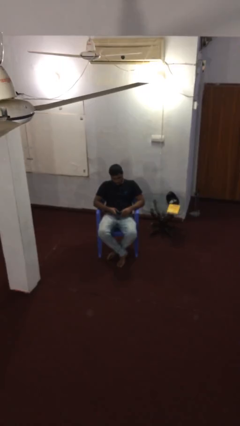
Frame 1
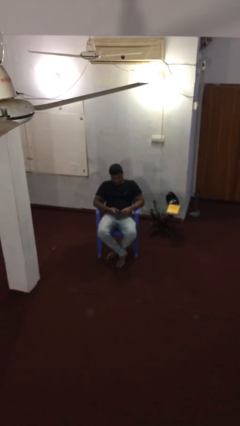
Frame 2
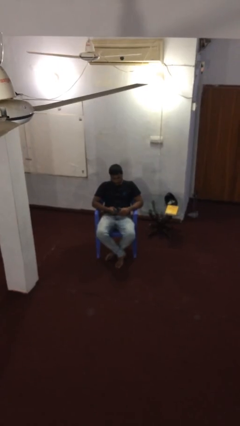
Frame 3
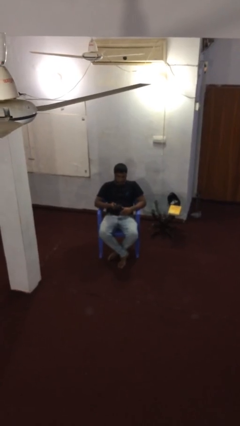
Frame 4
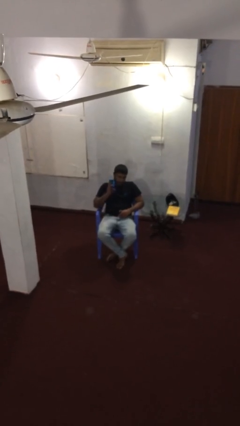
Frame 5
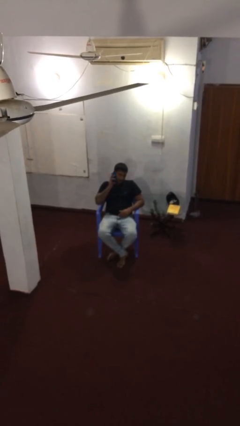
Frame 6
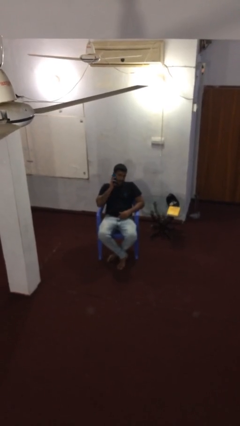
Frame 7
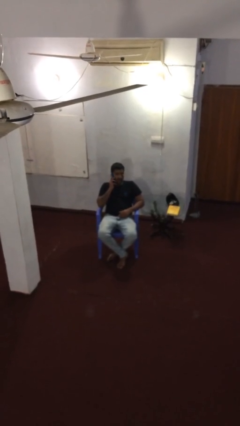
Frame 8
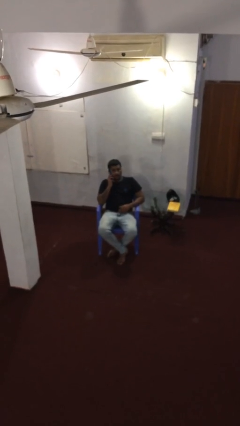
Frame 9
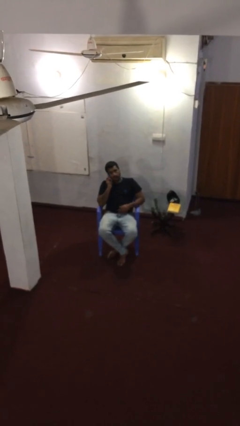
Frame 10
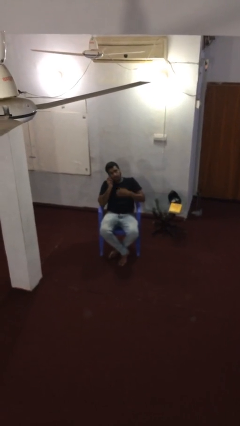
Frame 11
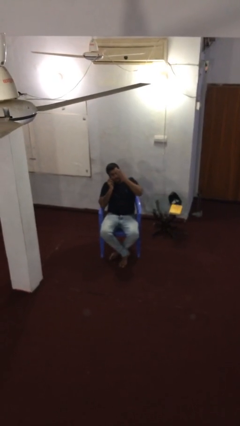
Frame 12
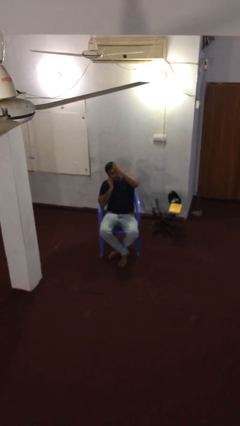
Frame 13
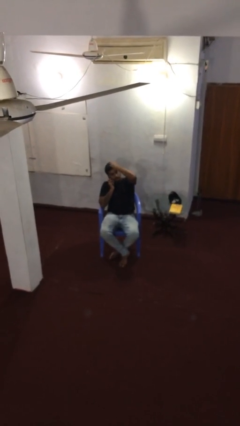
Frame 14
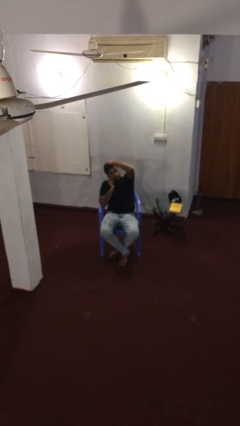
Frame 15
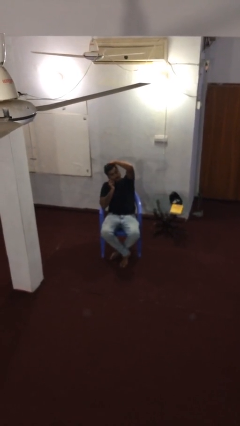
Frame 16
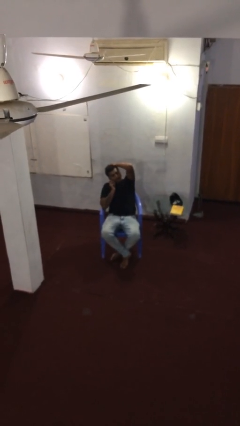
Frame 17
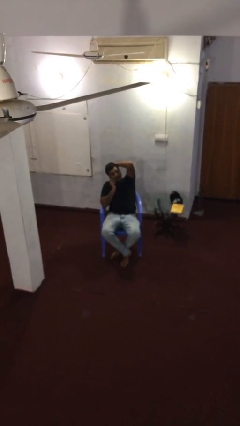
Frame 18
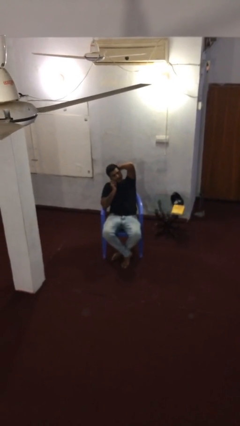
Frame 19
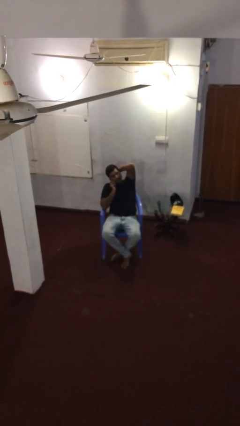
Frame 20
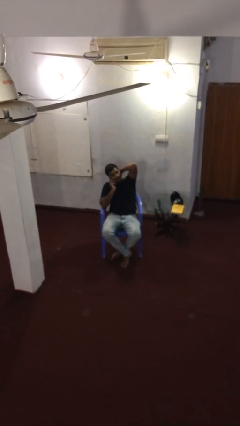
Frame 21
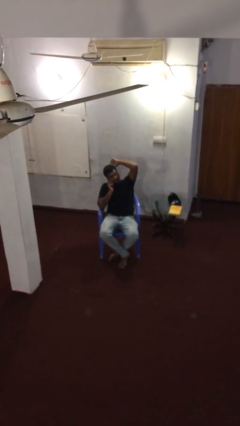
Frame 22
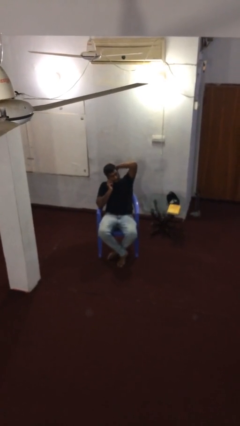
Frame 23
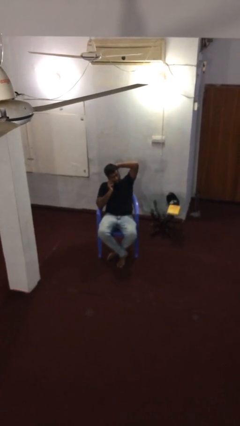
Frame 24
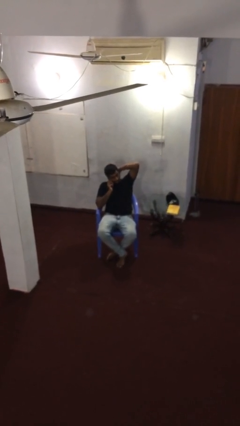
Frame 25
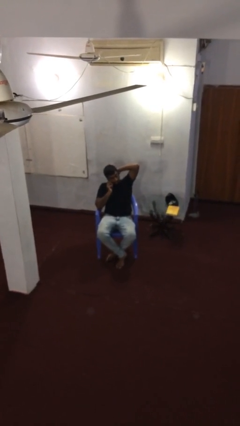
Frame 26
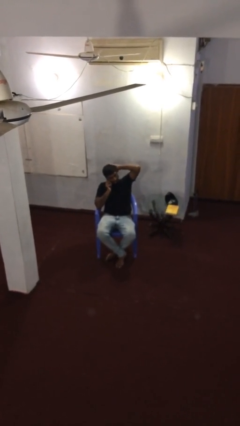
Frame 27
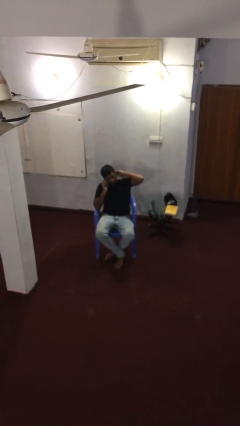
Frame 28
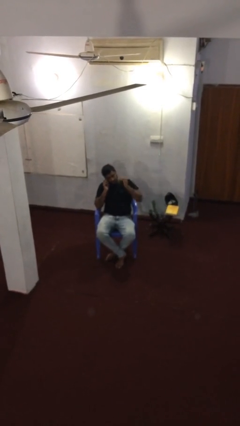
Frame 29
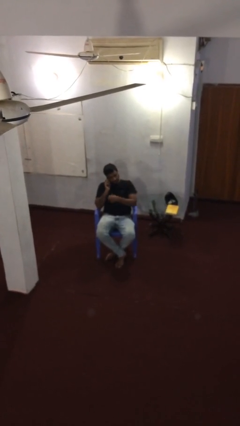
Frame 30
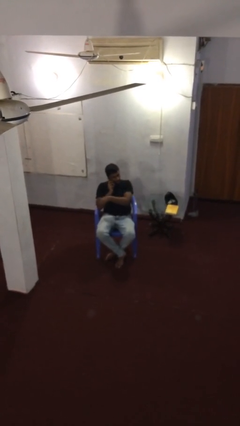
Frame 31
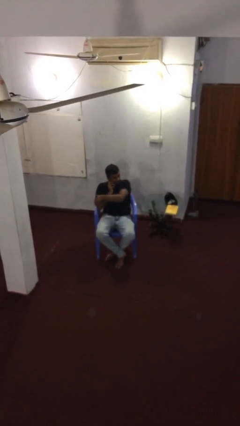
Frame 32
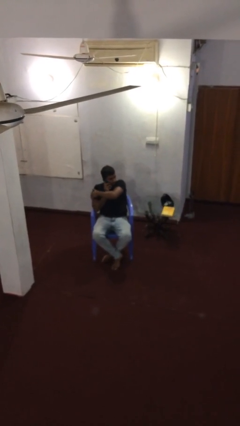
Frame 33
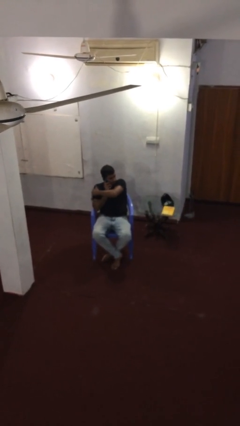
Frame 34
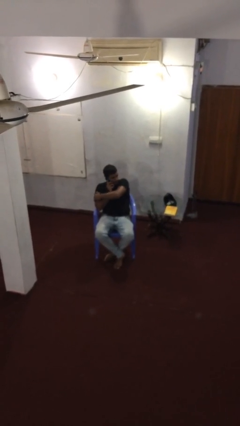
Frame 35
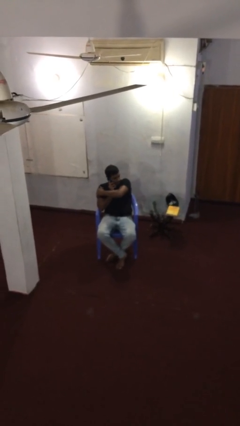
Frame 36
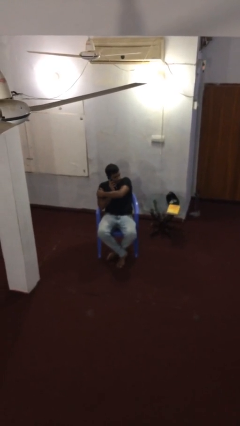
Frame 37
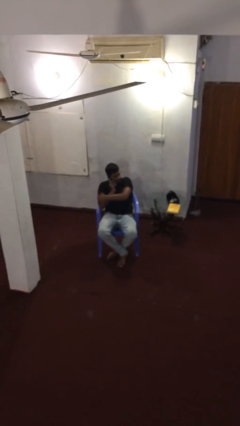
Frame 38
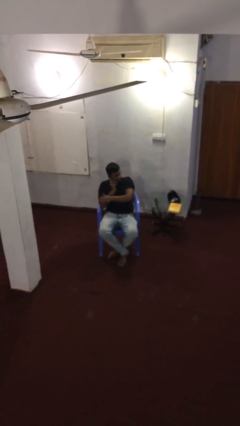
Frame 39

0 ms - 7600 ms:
person talks on phone

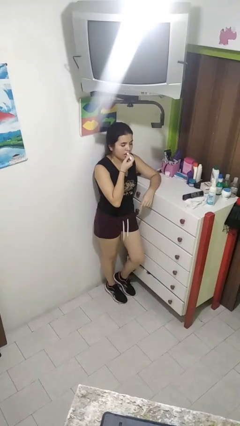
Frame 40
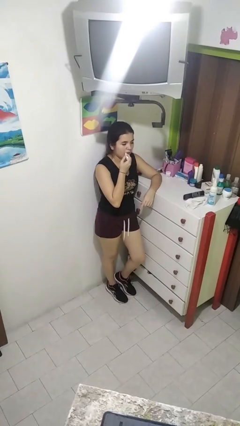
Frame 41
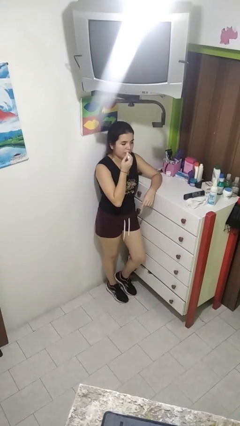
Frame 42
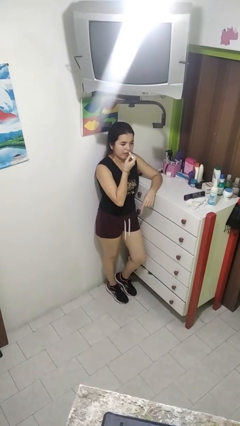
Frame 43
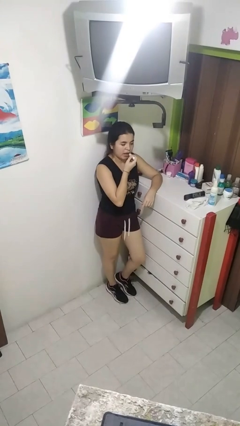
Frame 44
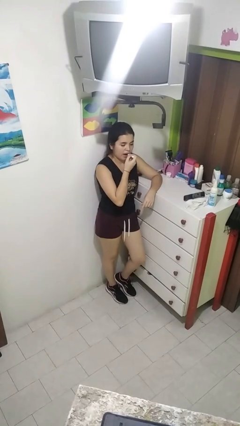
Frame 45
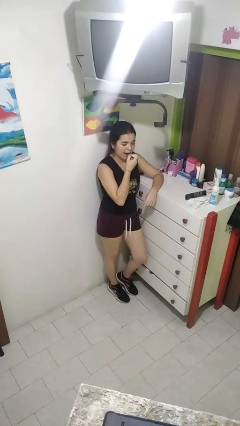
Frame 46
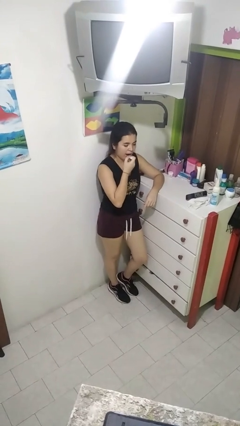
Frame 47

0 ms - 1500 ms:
person applies lip makeup

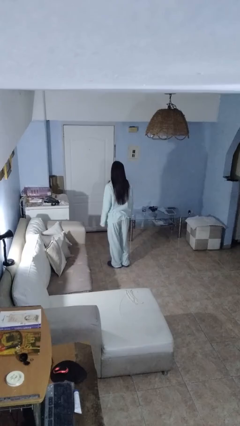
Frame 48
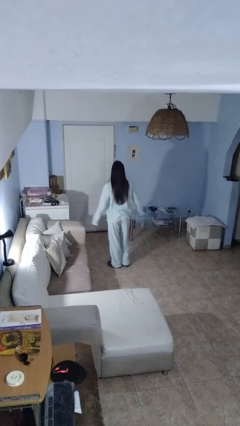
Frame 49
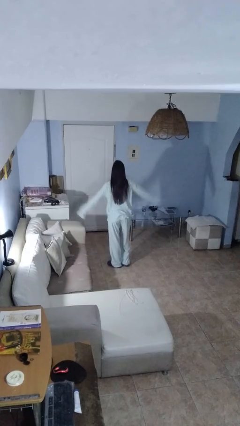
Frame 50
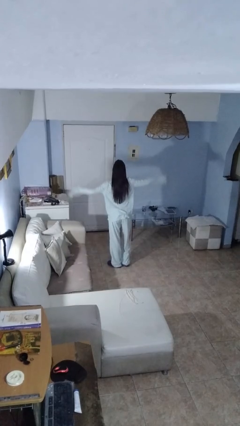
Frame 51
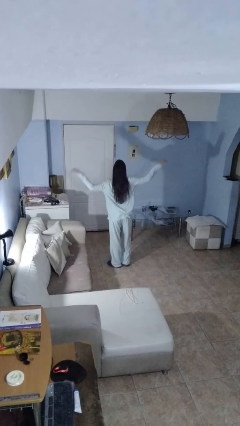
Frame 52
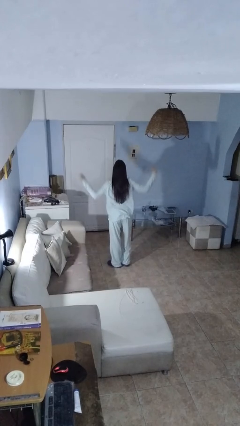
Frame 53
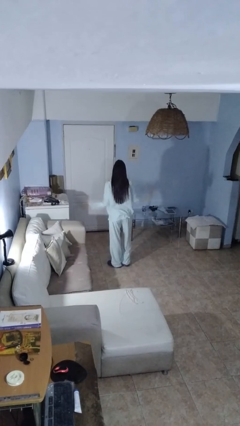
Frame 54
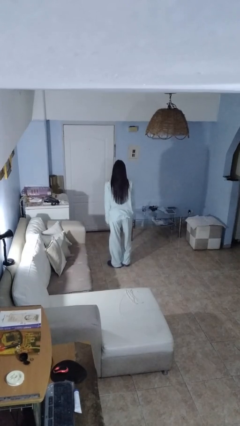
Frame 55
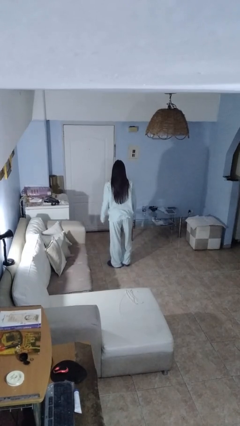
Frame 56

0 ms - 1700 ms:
person slaps hands on thighs

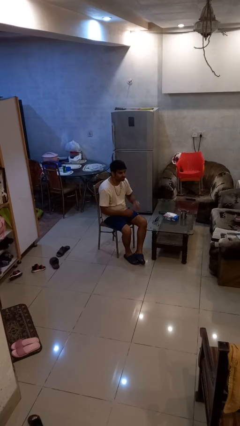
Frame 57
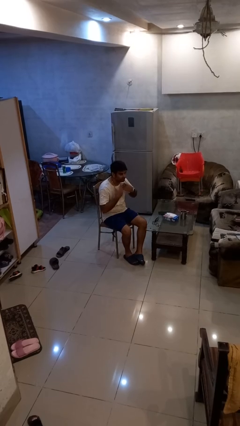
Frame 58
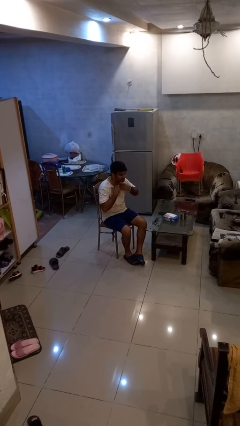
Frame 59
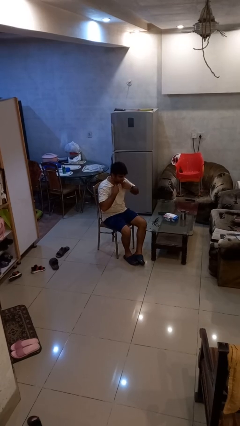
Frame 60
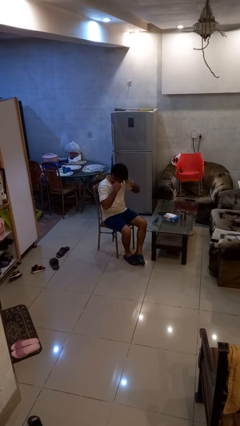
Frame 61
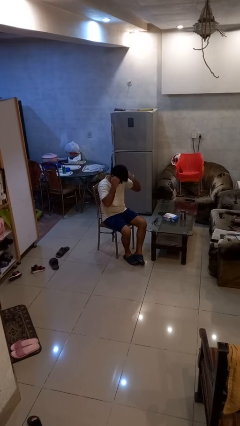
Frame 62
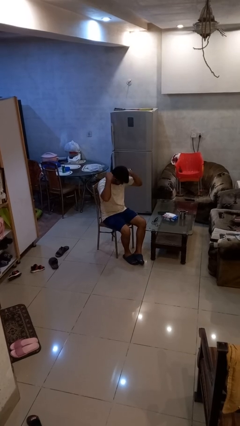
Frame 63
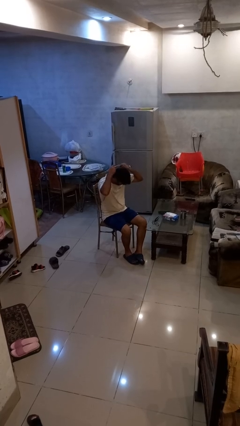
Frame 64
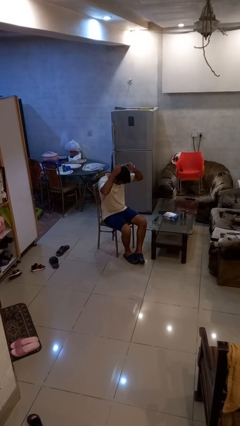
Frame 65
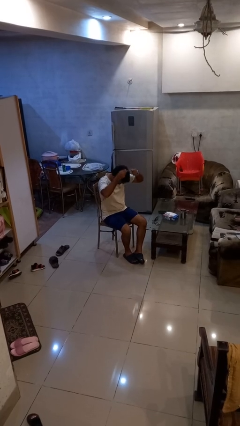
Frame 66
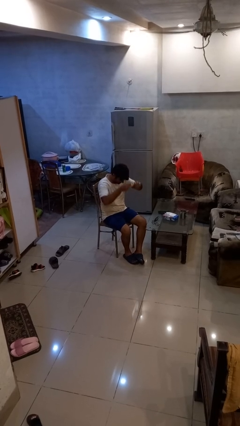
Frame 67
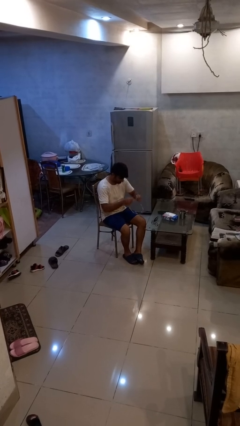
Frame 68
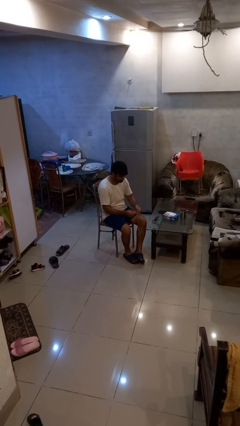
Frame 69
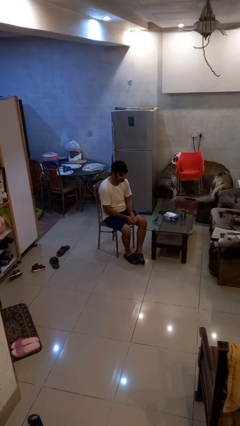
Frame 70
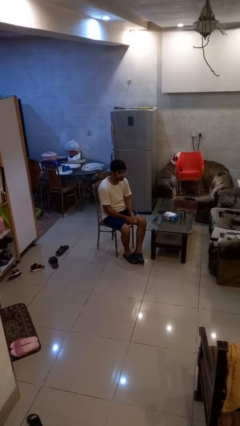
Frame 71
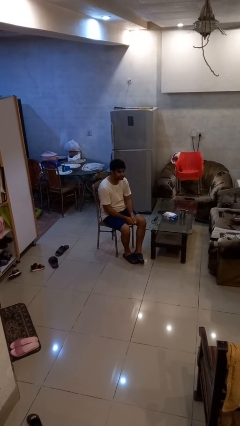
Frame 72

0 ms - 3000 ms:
person takes off necklace

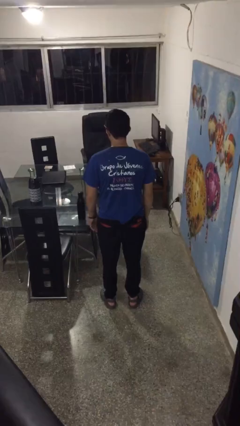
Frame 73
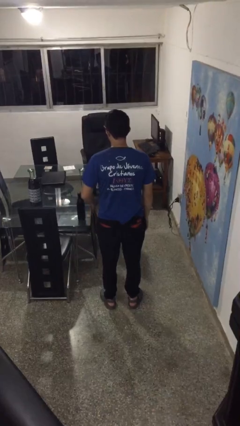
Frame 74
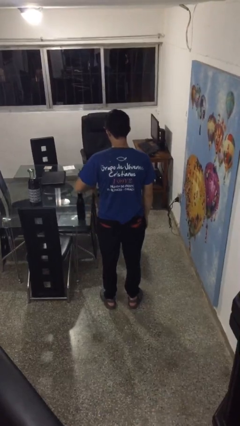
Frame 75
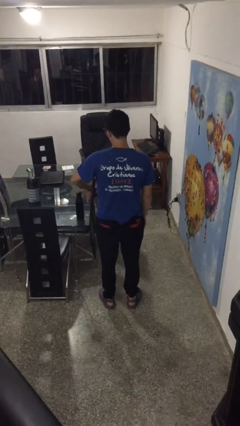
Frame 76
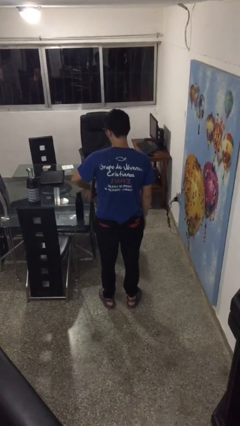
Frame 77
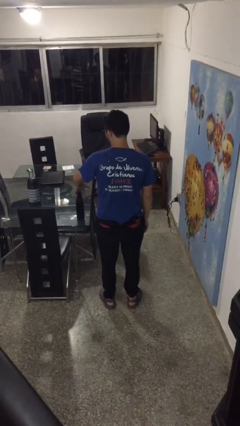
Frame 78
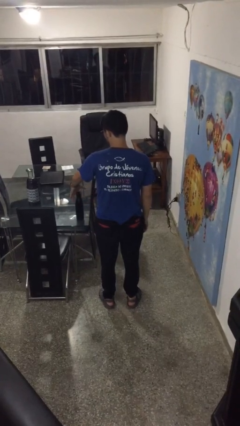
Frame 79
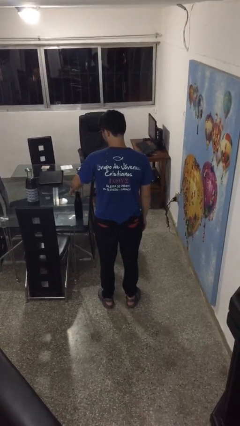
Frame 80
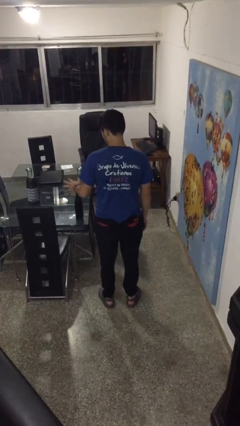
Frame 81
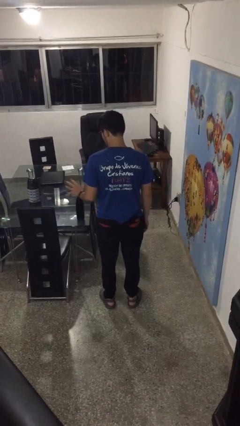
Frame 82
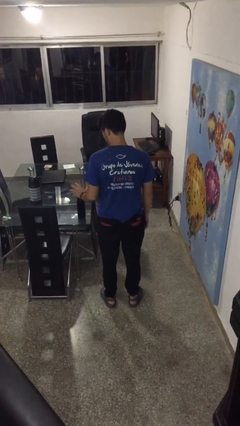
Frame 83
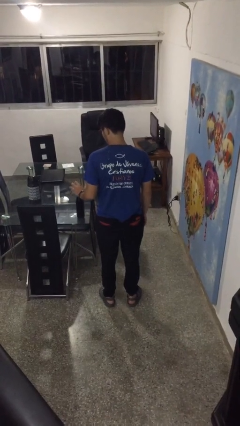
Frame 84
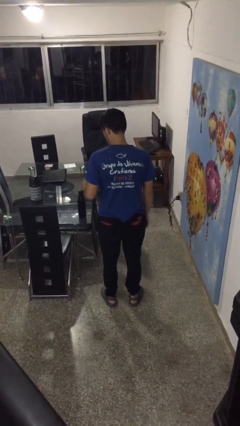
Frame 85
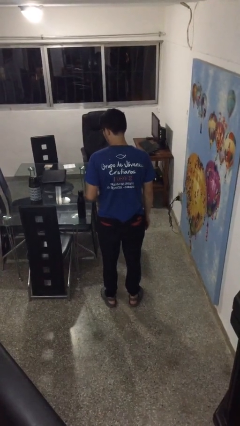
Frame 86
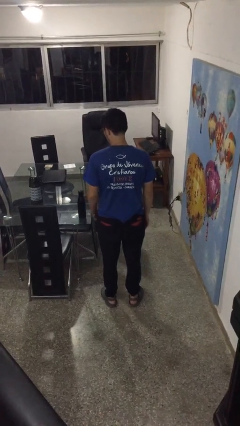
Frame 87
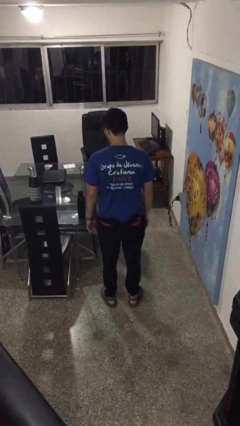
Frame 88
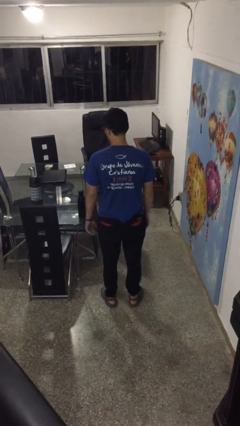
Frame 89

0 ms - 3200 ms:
person waves hand over object

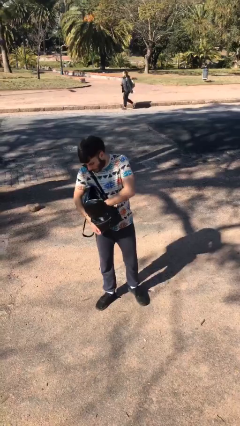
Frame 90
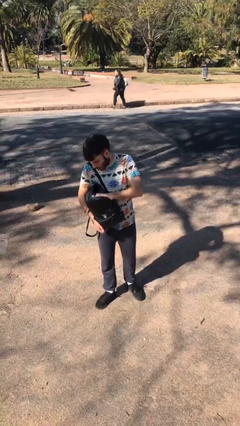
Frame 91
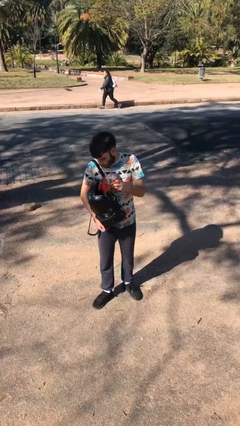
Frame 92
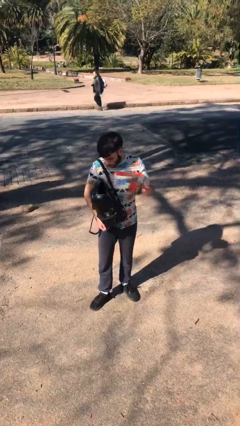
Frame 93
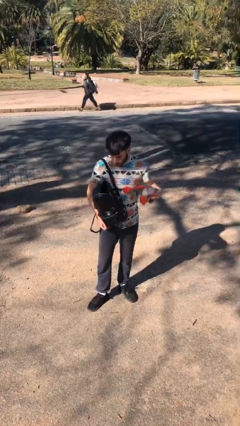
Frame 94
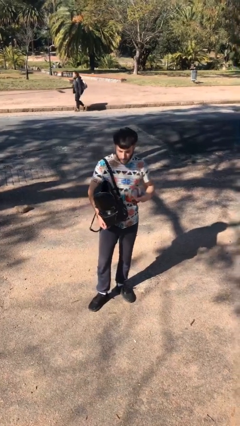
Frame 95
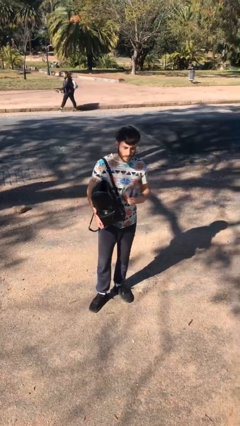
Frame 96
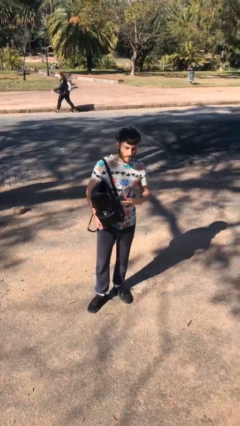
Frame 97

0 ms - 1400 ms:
person takes object from backpack
